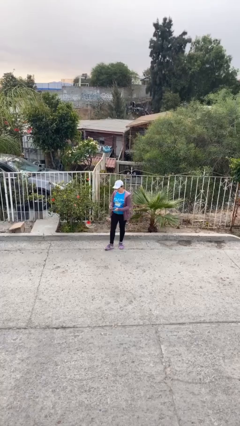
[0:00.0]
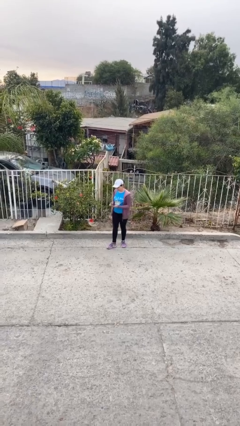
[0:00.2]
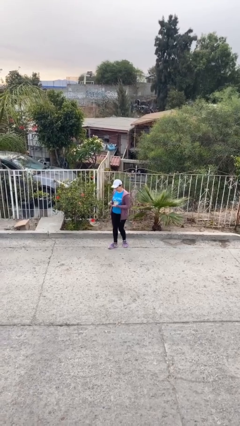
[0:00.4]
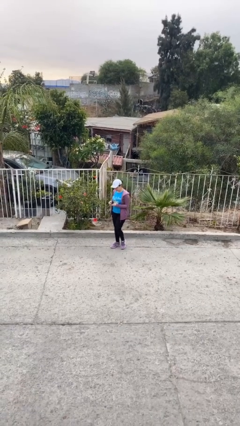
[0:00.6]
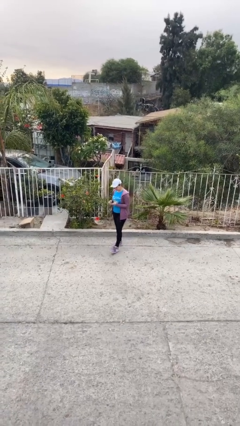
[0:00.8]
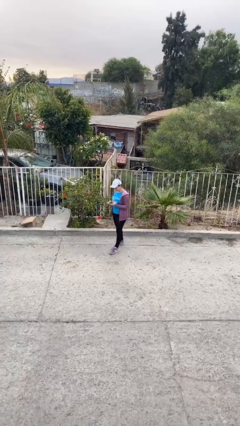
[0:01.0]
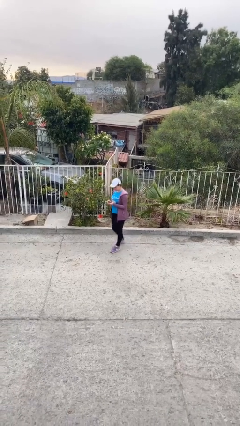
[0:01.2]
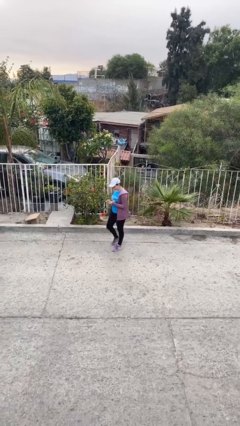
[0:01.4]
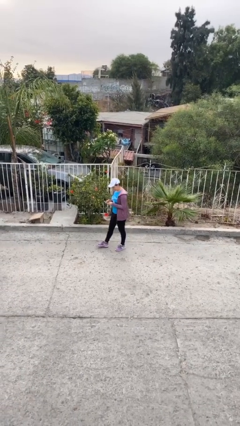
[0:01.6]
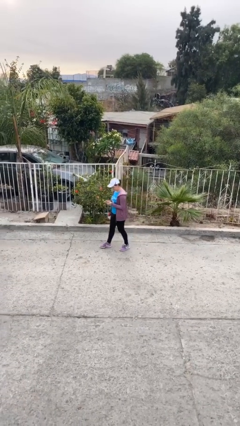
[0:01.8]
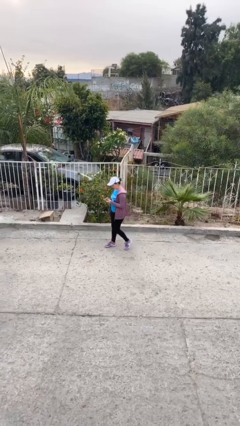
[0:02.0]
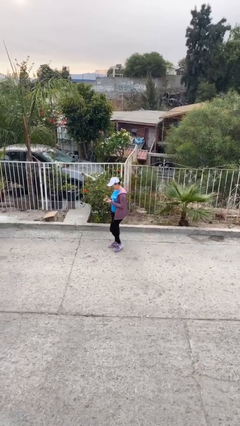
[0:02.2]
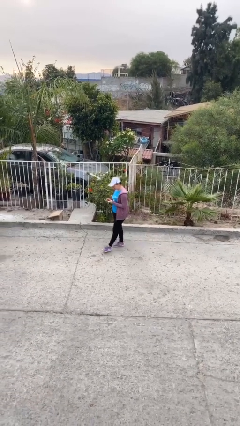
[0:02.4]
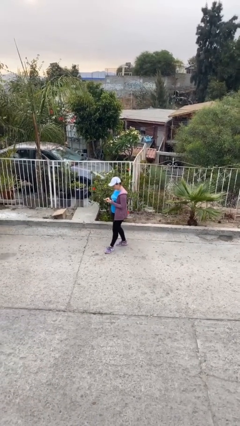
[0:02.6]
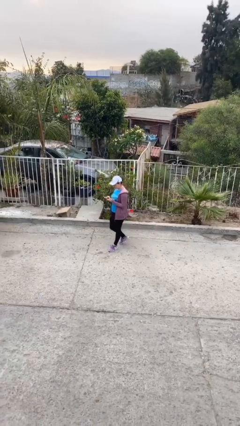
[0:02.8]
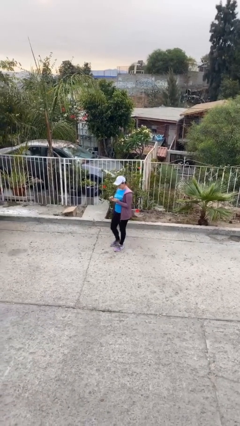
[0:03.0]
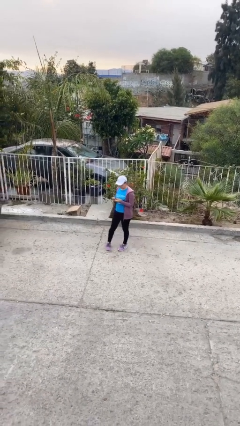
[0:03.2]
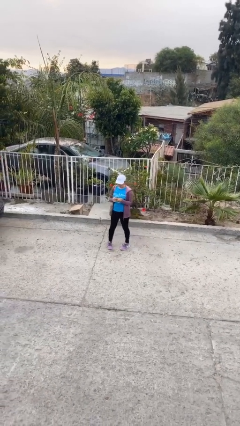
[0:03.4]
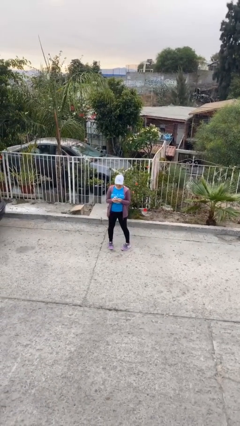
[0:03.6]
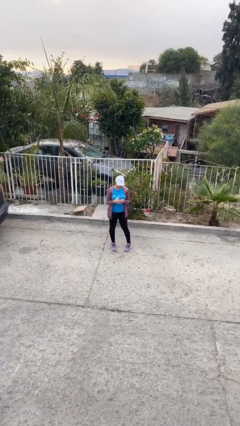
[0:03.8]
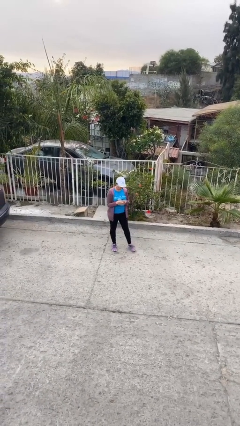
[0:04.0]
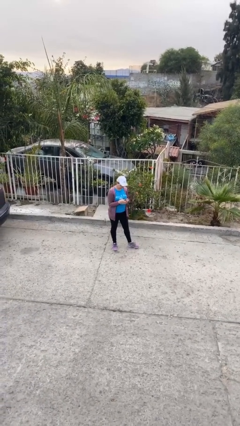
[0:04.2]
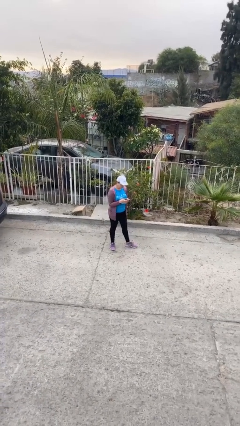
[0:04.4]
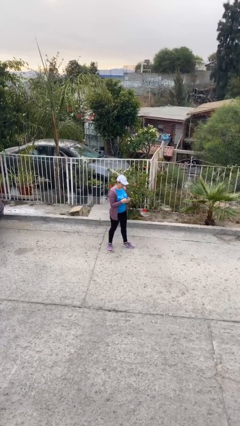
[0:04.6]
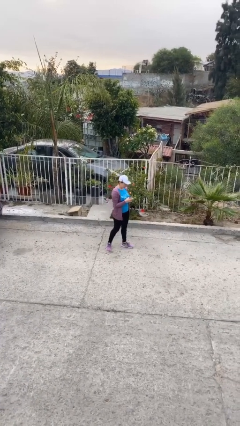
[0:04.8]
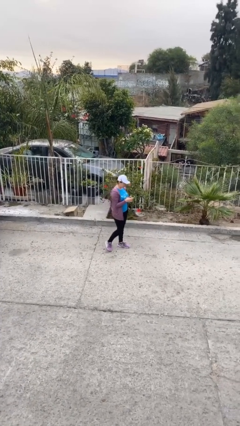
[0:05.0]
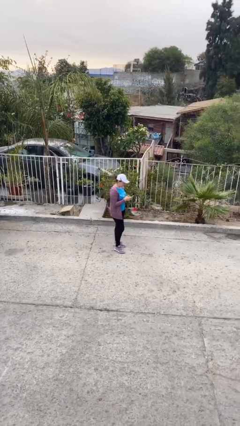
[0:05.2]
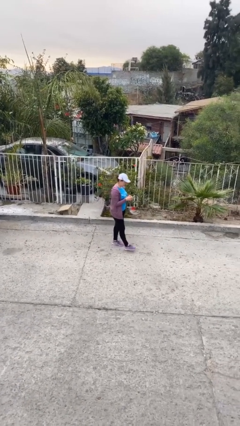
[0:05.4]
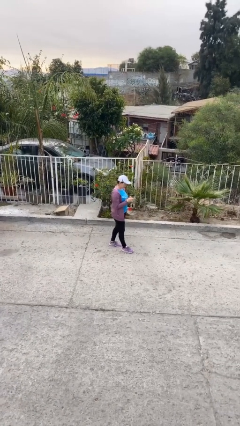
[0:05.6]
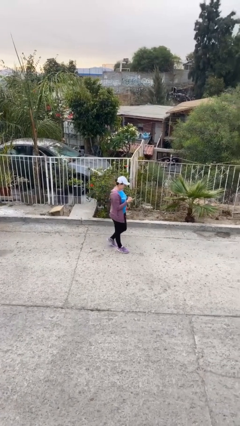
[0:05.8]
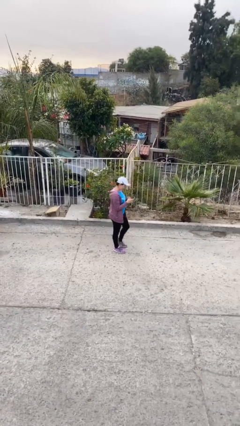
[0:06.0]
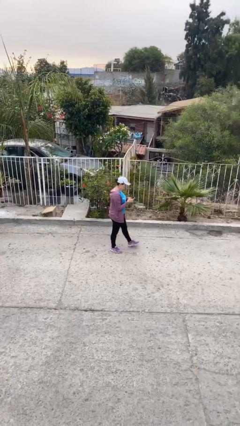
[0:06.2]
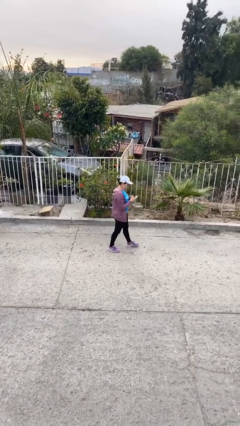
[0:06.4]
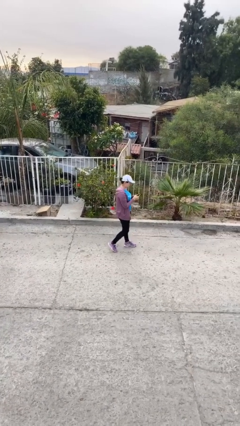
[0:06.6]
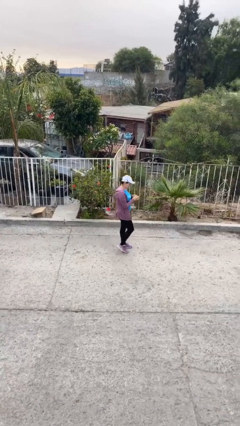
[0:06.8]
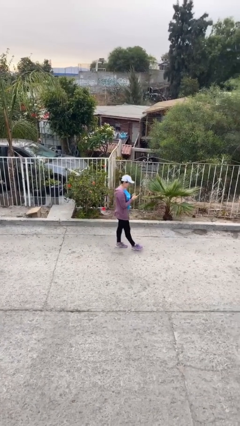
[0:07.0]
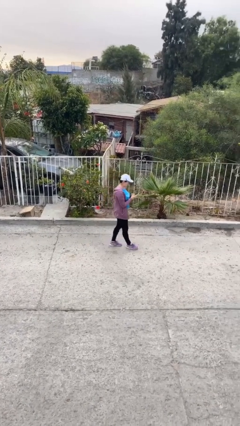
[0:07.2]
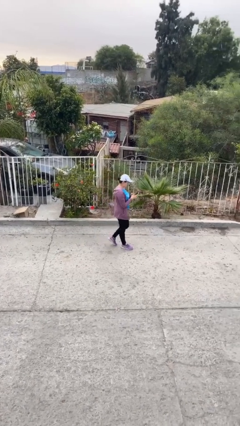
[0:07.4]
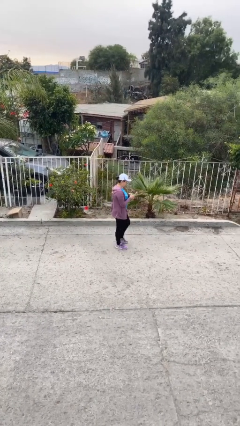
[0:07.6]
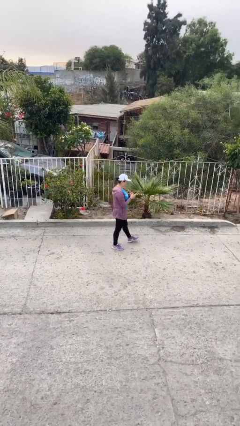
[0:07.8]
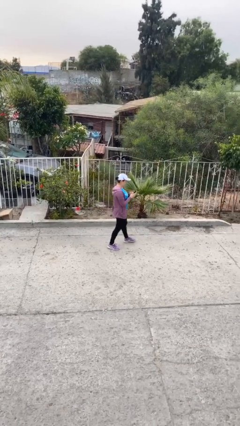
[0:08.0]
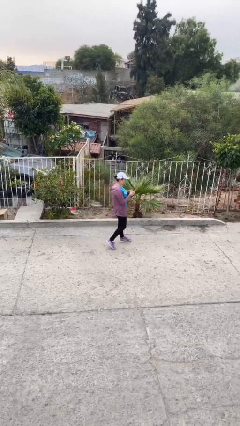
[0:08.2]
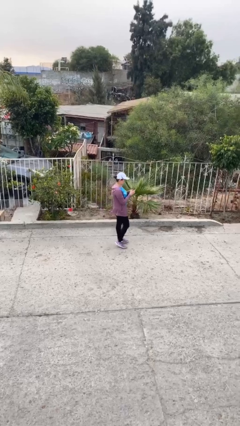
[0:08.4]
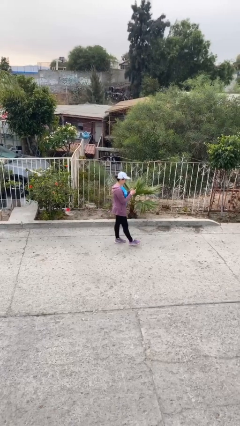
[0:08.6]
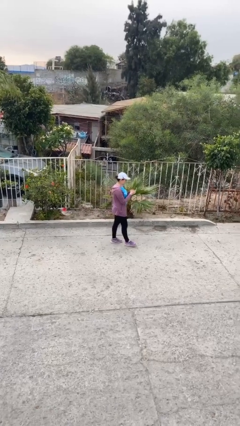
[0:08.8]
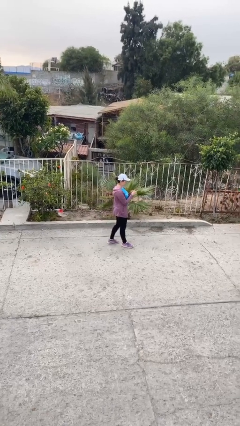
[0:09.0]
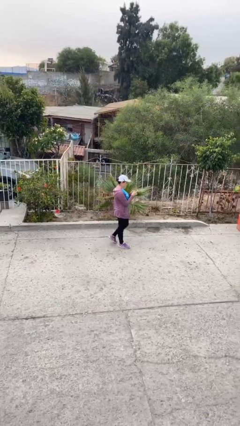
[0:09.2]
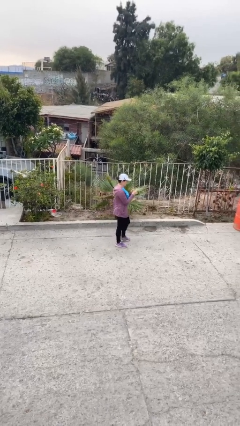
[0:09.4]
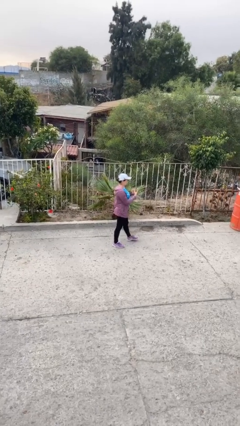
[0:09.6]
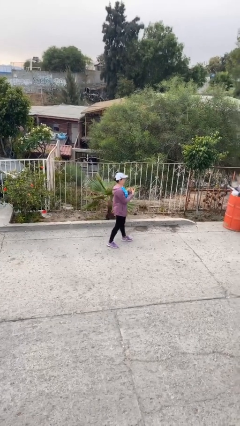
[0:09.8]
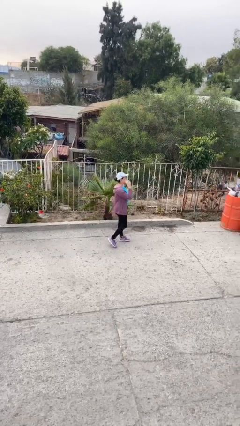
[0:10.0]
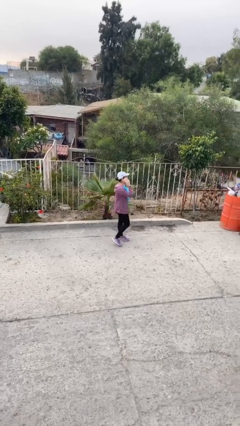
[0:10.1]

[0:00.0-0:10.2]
person texts on phone

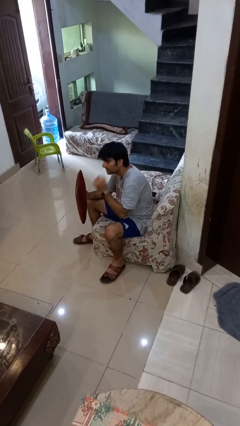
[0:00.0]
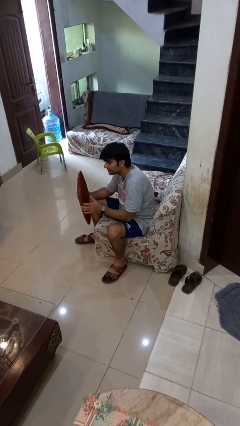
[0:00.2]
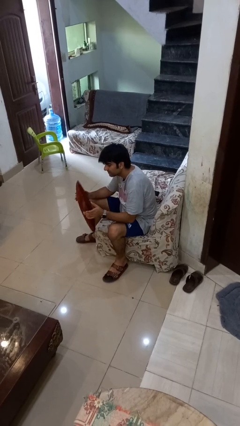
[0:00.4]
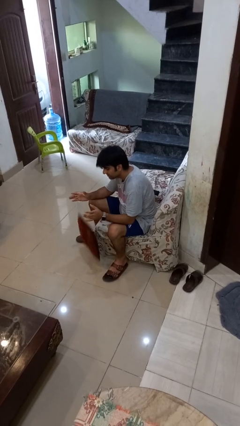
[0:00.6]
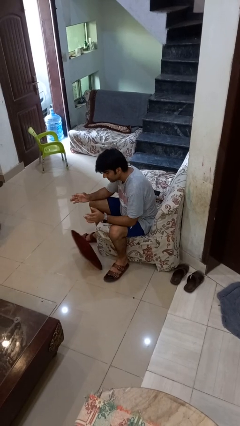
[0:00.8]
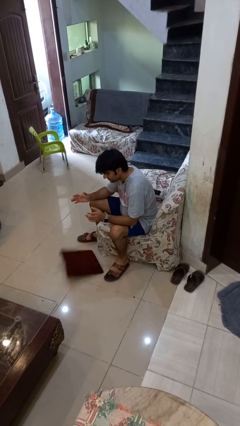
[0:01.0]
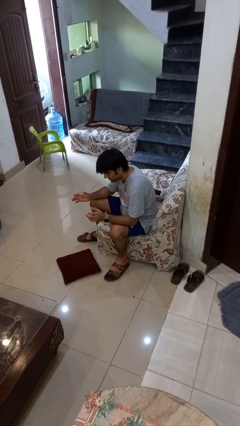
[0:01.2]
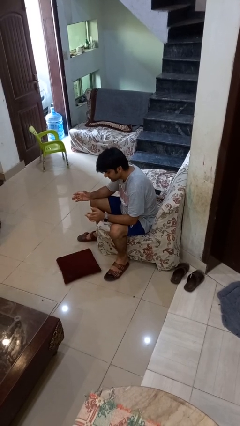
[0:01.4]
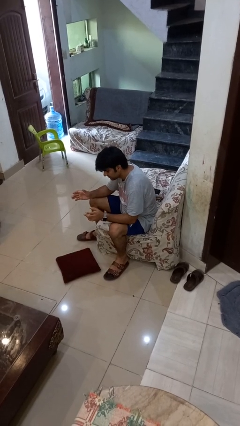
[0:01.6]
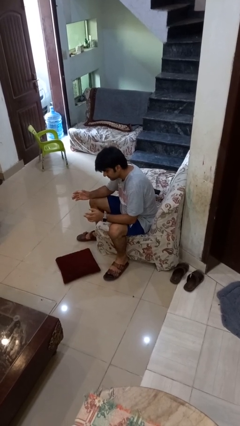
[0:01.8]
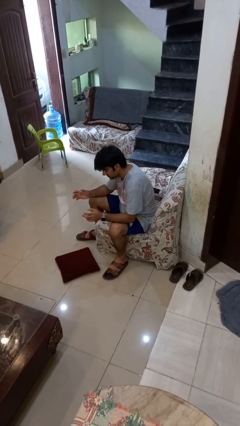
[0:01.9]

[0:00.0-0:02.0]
person drops object

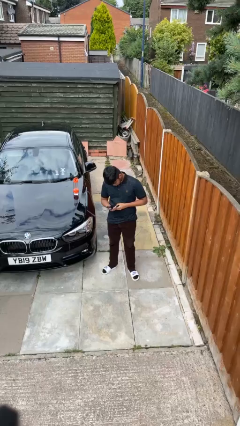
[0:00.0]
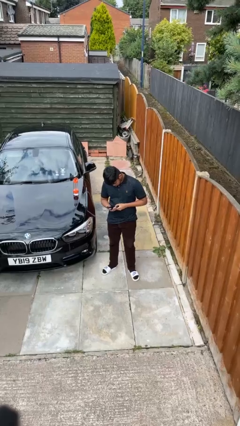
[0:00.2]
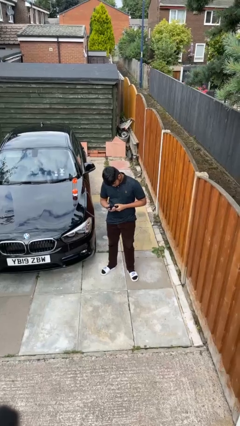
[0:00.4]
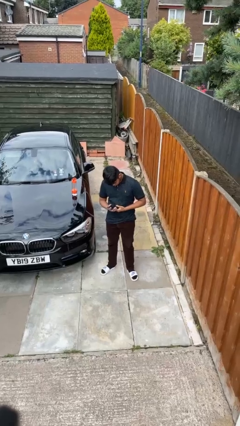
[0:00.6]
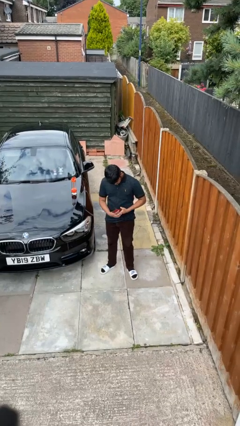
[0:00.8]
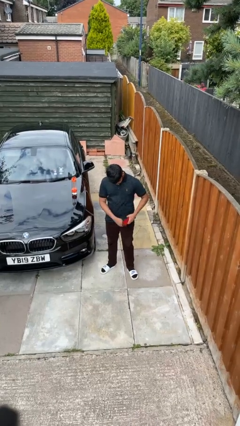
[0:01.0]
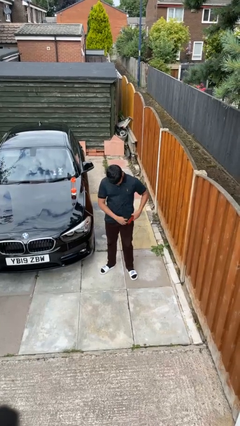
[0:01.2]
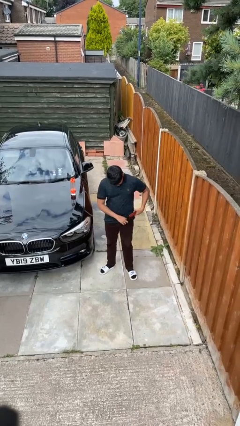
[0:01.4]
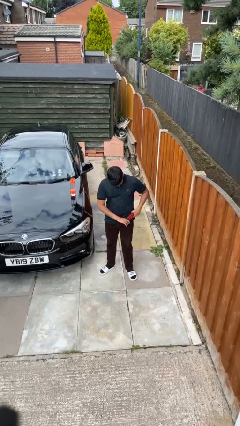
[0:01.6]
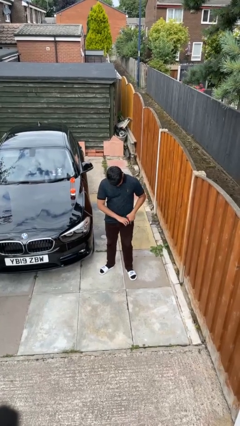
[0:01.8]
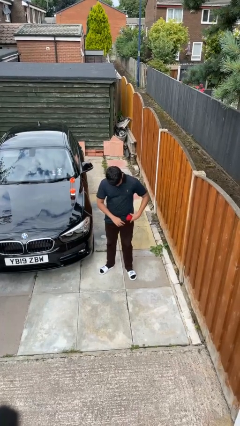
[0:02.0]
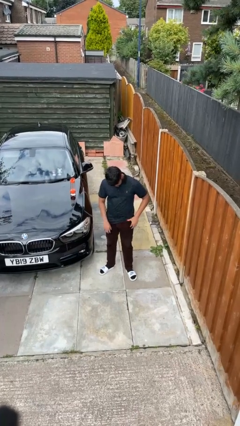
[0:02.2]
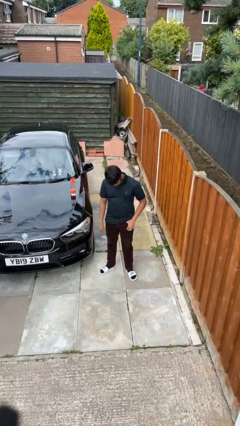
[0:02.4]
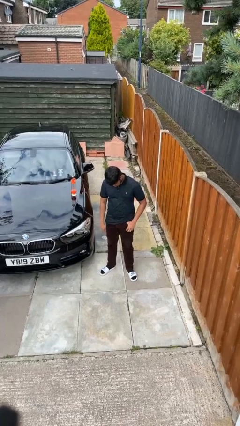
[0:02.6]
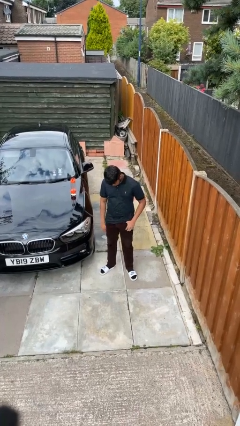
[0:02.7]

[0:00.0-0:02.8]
person puts phone into pocket

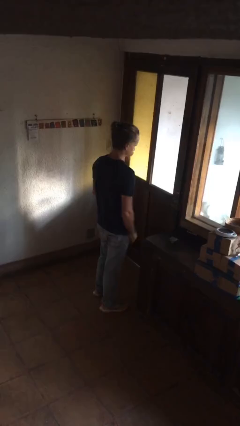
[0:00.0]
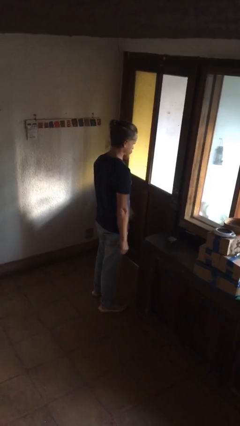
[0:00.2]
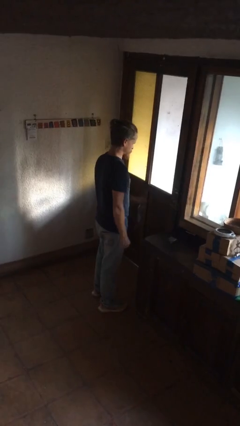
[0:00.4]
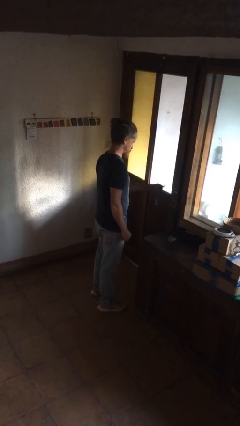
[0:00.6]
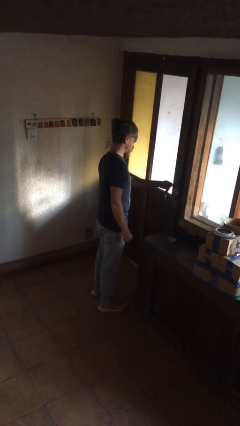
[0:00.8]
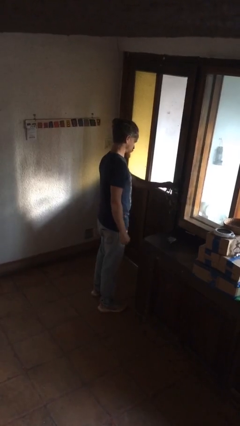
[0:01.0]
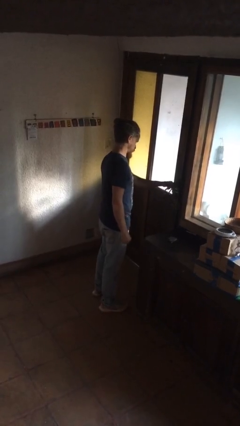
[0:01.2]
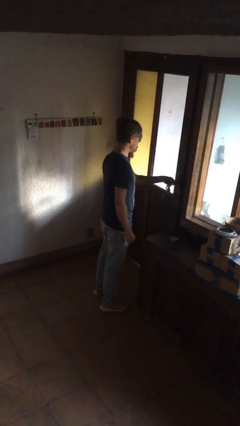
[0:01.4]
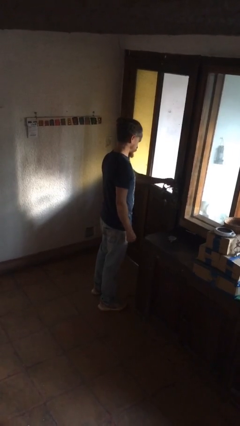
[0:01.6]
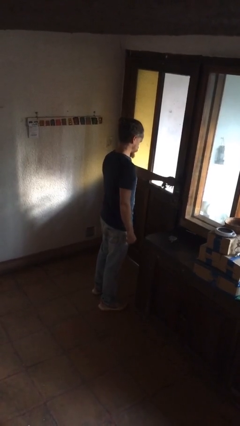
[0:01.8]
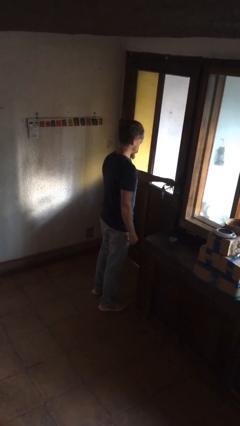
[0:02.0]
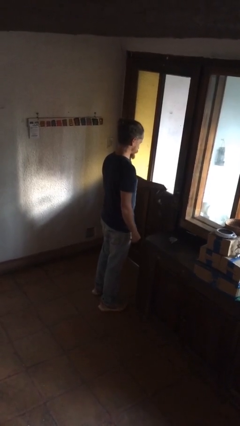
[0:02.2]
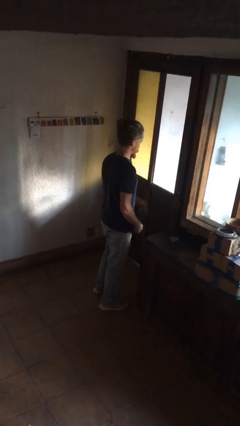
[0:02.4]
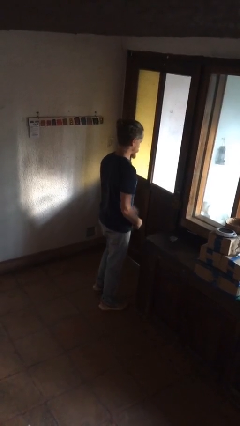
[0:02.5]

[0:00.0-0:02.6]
person locks door with keys

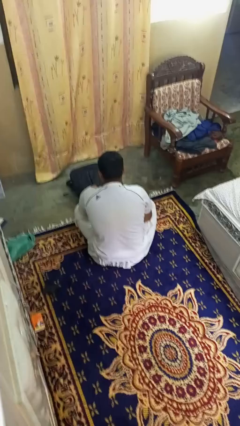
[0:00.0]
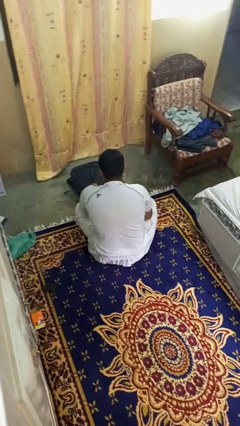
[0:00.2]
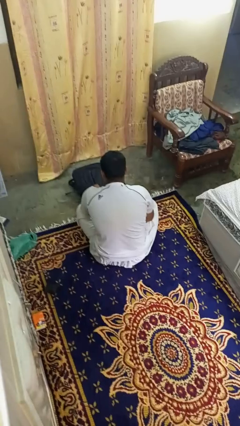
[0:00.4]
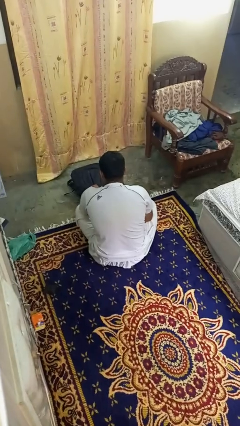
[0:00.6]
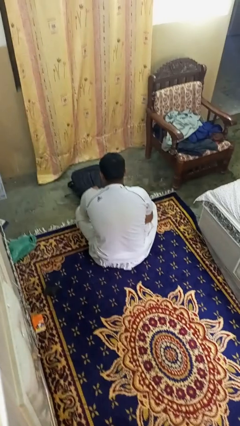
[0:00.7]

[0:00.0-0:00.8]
person takes object from bag
